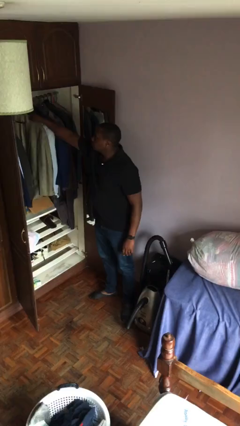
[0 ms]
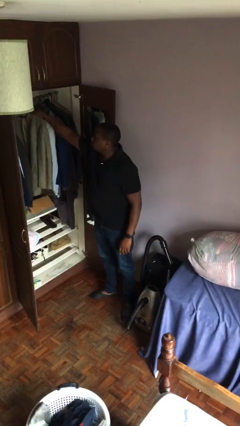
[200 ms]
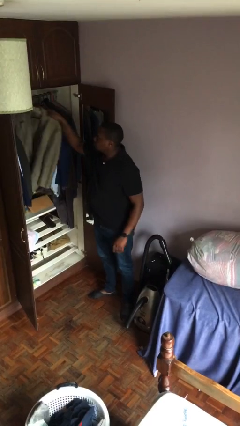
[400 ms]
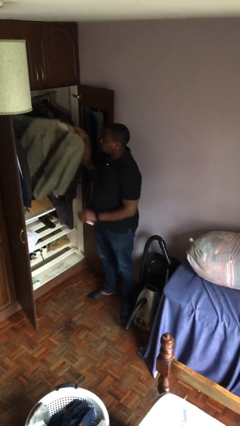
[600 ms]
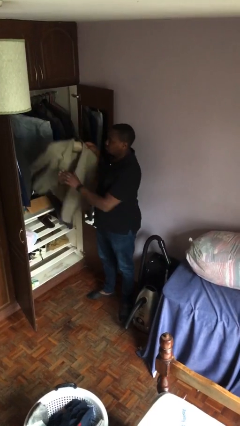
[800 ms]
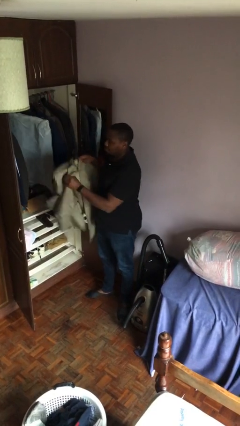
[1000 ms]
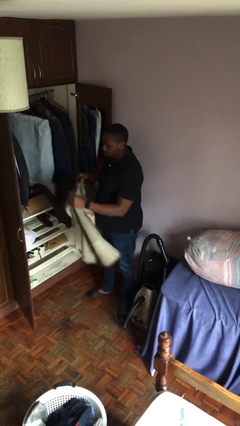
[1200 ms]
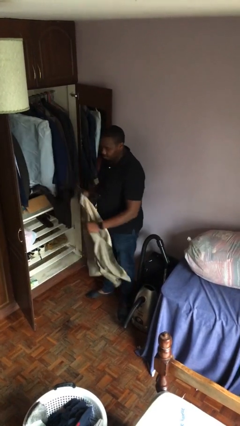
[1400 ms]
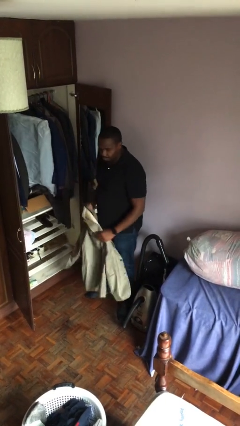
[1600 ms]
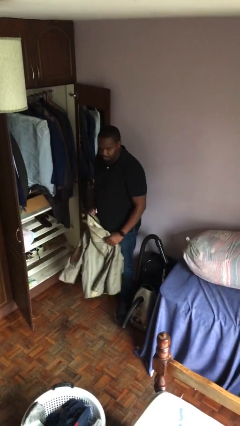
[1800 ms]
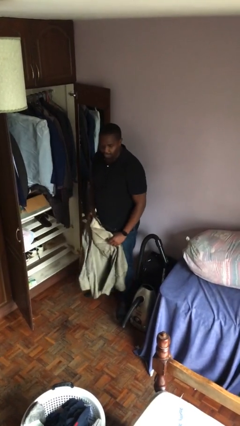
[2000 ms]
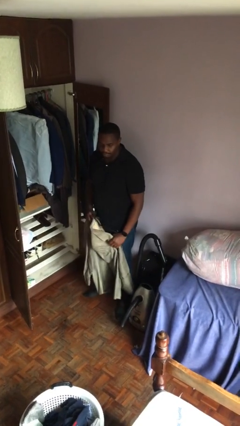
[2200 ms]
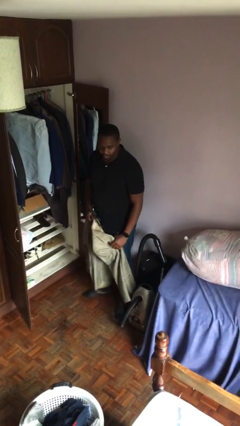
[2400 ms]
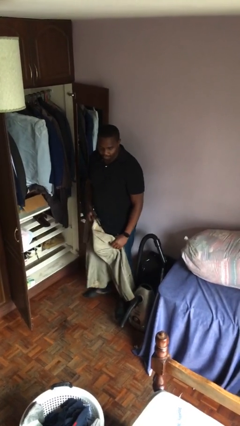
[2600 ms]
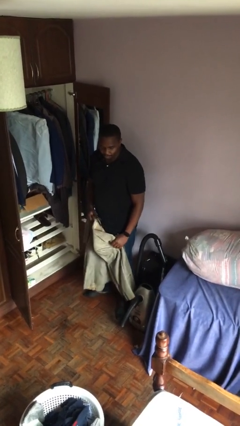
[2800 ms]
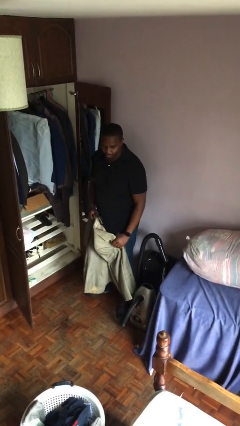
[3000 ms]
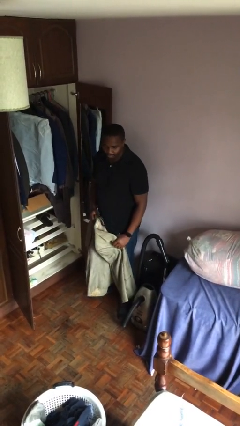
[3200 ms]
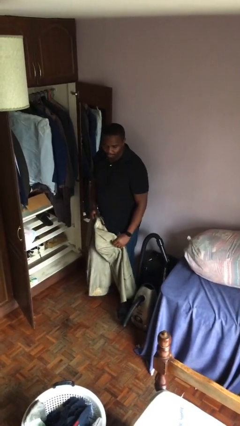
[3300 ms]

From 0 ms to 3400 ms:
person takes clothes from closet

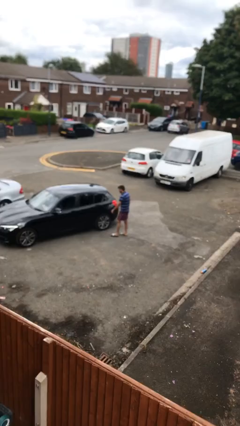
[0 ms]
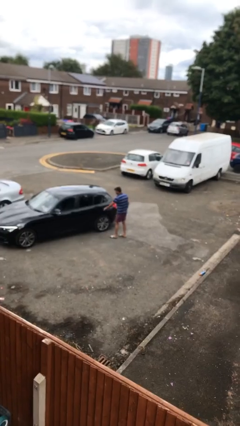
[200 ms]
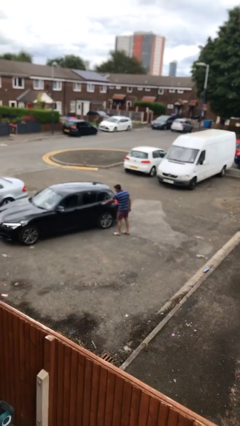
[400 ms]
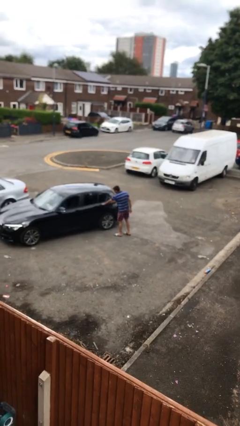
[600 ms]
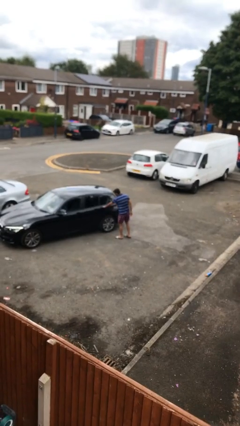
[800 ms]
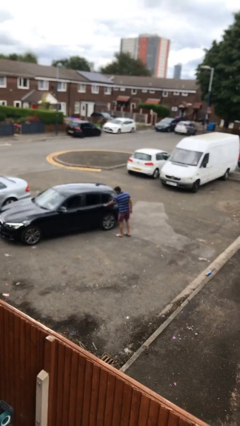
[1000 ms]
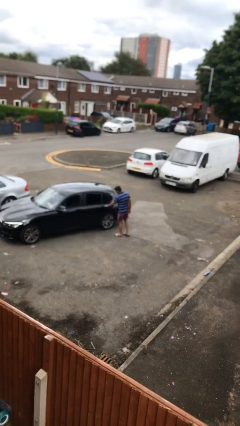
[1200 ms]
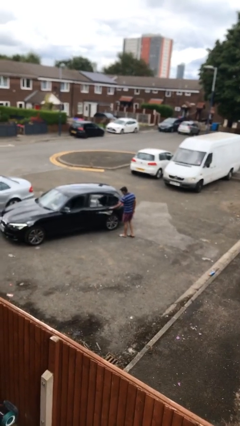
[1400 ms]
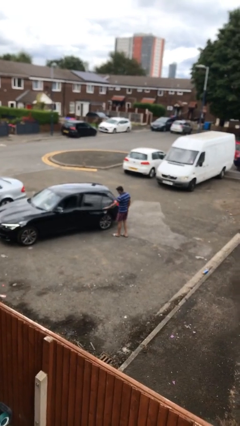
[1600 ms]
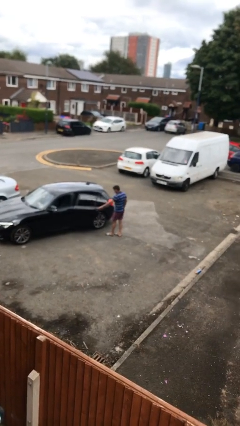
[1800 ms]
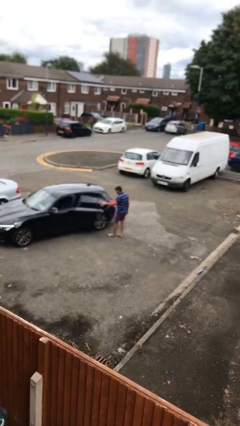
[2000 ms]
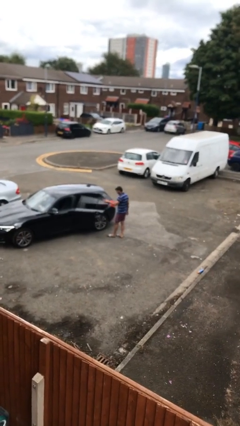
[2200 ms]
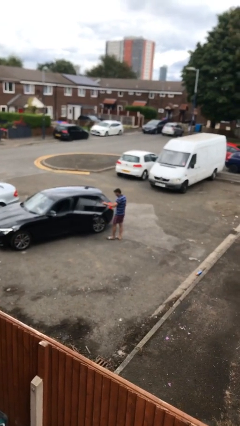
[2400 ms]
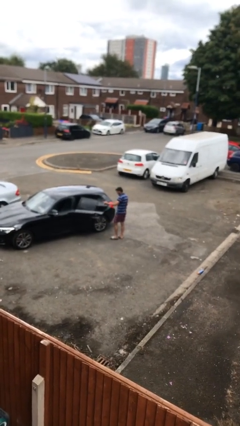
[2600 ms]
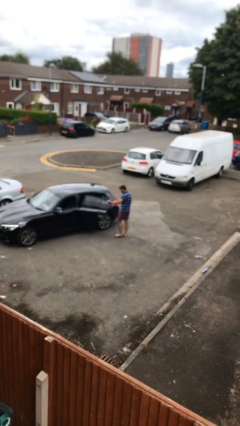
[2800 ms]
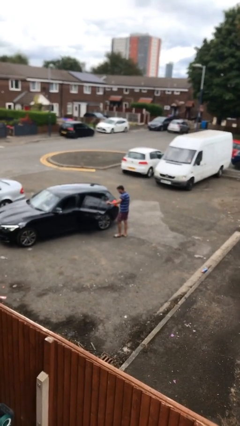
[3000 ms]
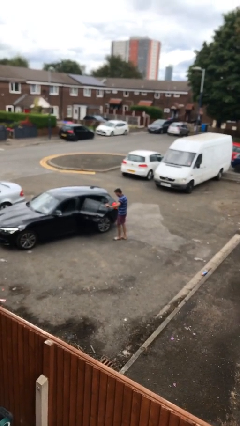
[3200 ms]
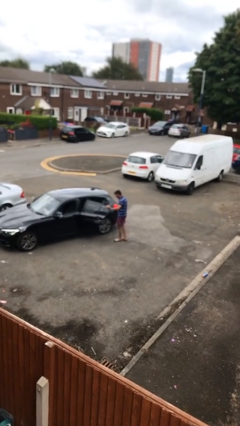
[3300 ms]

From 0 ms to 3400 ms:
person opens car door

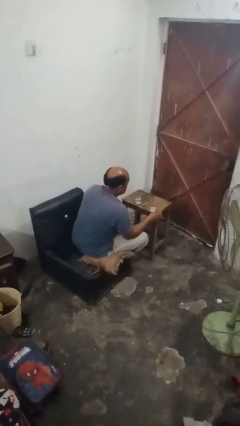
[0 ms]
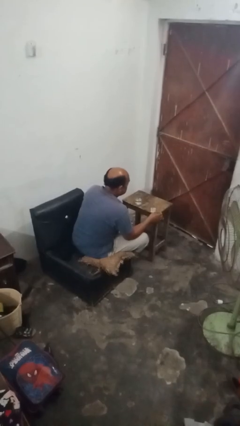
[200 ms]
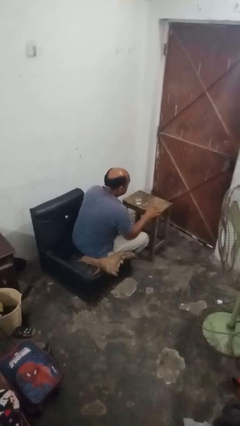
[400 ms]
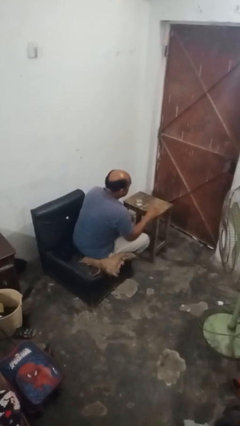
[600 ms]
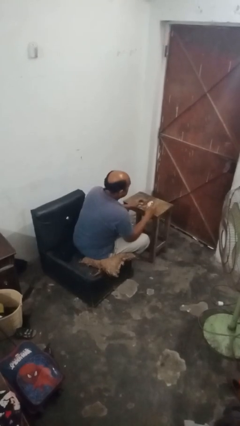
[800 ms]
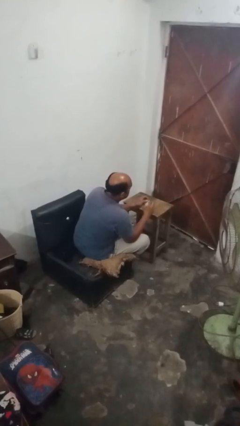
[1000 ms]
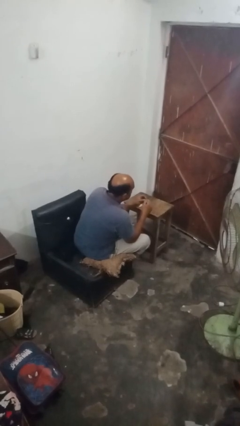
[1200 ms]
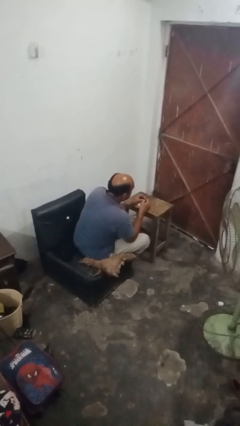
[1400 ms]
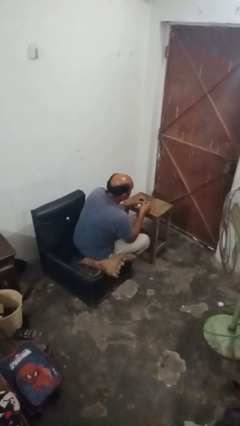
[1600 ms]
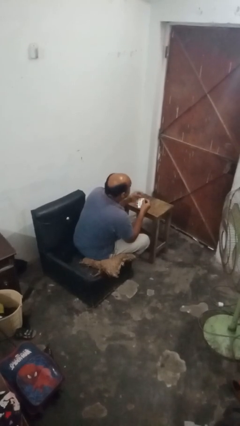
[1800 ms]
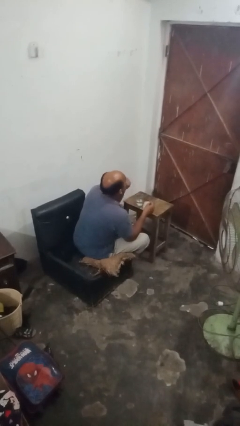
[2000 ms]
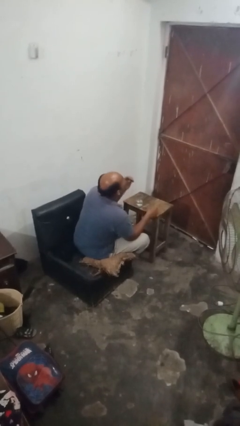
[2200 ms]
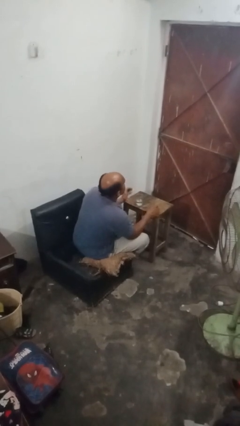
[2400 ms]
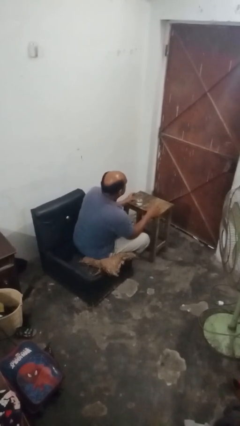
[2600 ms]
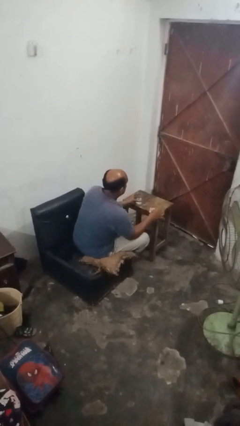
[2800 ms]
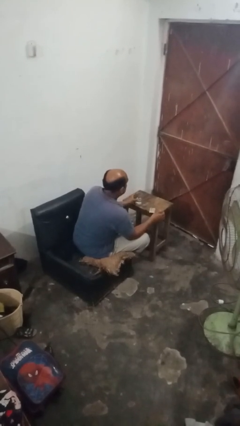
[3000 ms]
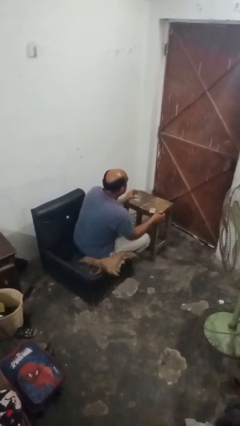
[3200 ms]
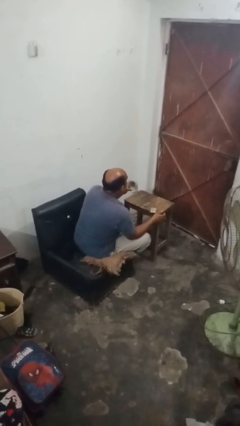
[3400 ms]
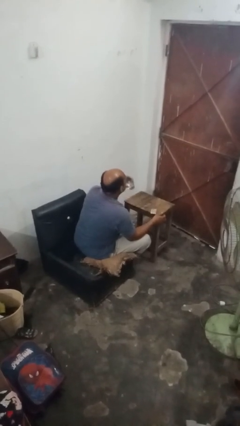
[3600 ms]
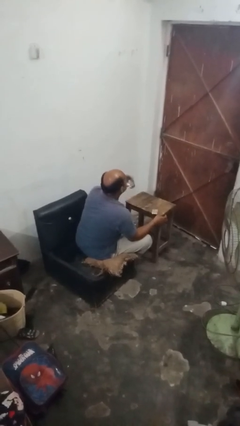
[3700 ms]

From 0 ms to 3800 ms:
person takes medicine pills

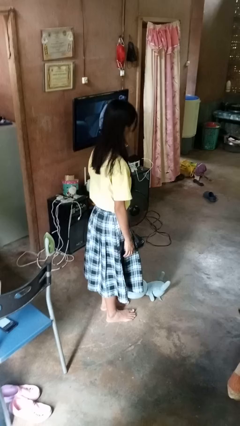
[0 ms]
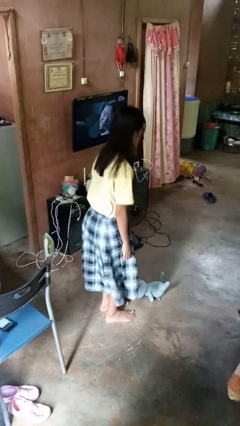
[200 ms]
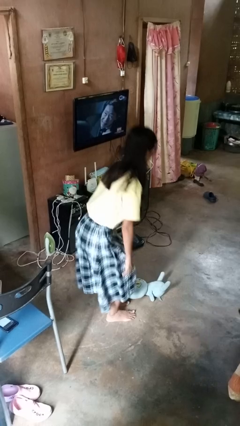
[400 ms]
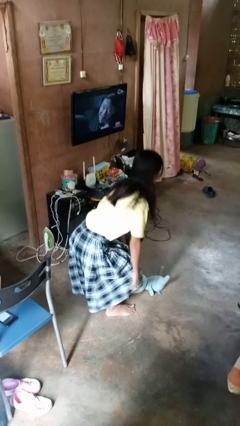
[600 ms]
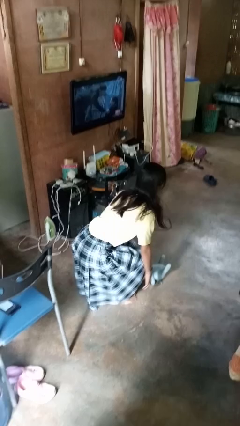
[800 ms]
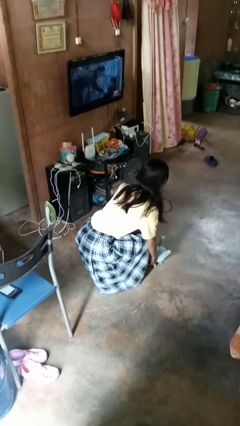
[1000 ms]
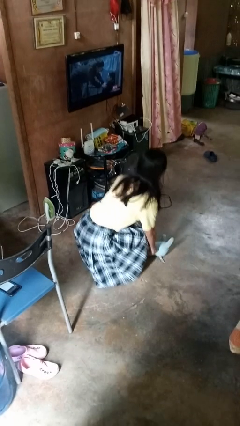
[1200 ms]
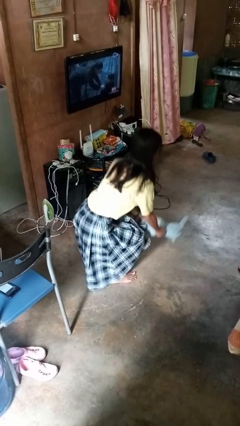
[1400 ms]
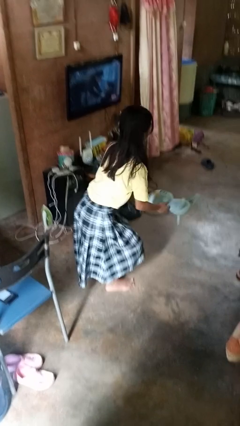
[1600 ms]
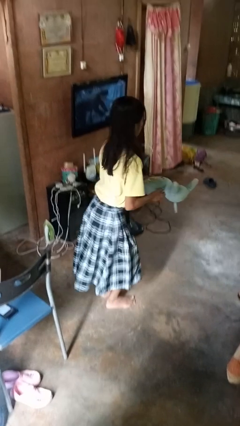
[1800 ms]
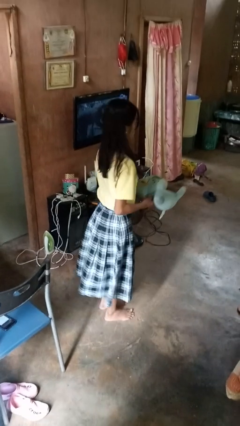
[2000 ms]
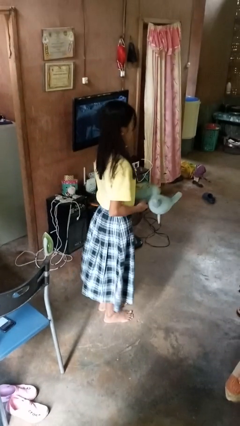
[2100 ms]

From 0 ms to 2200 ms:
person picks up object from floor

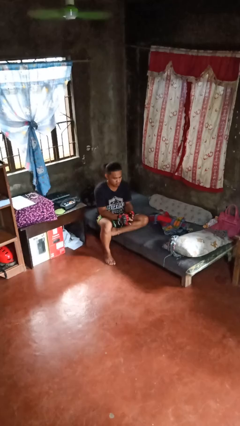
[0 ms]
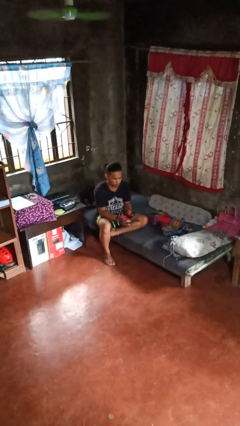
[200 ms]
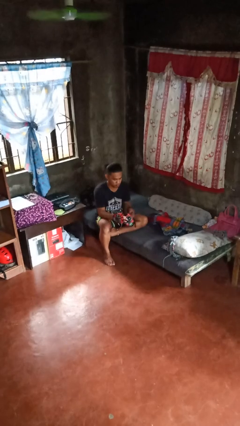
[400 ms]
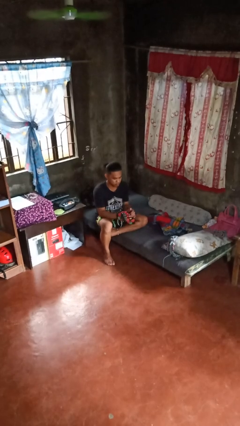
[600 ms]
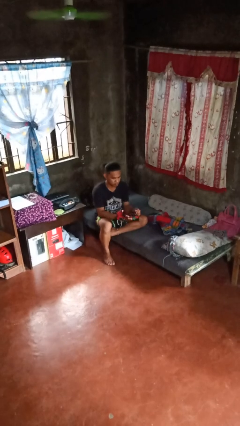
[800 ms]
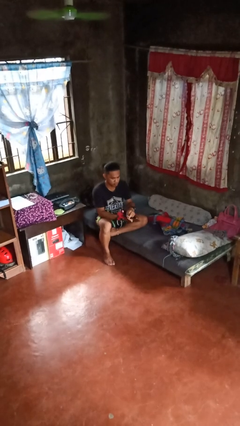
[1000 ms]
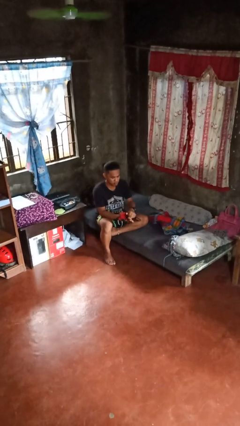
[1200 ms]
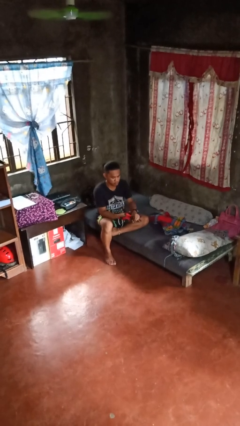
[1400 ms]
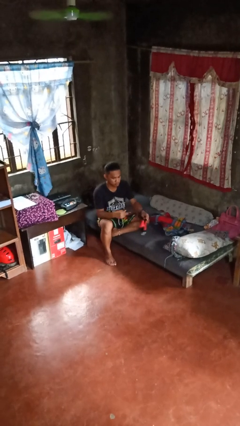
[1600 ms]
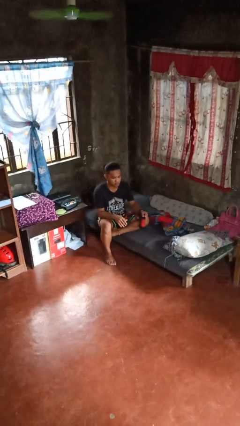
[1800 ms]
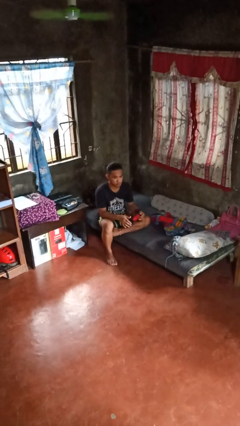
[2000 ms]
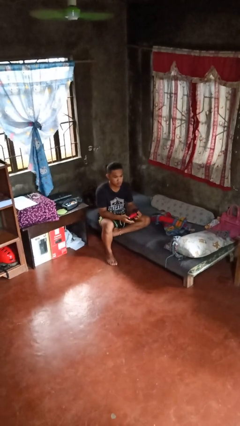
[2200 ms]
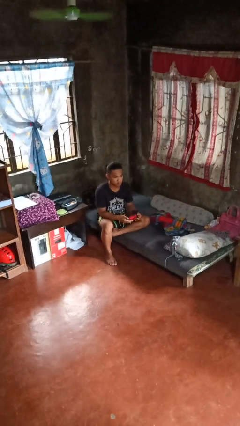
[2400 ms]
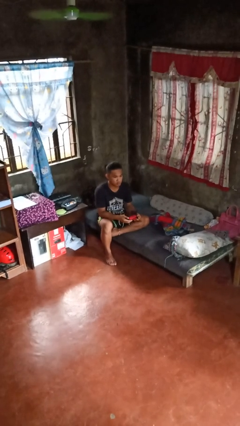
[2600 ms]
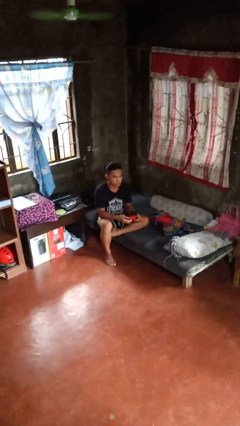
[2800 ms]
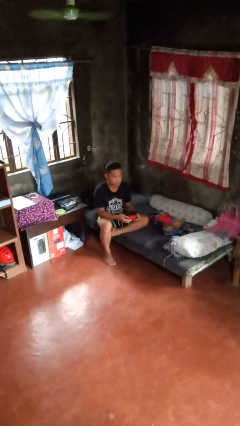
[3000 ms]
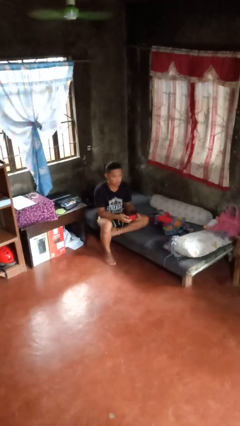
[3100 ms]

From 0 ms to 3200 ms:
person takes off gloves

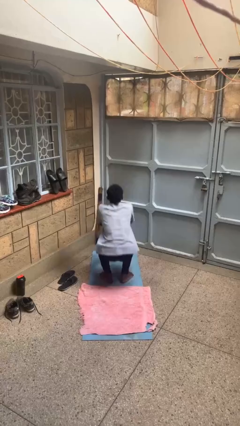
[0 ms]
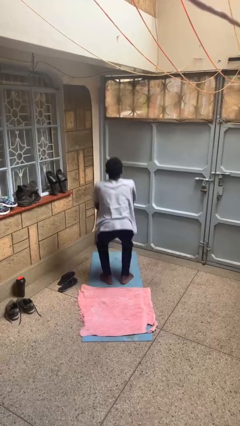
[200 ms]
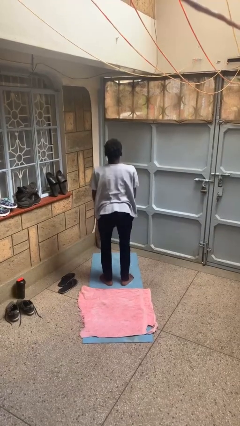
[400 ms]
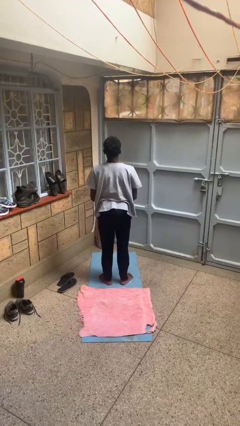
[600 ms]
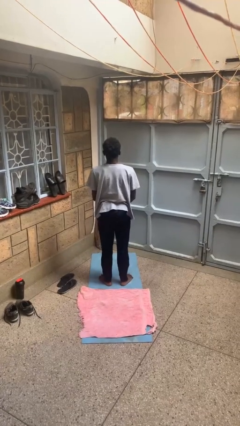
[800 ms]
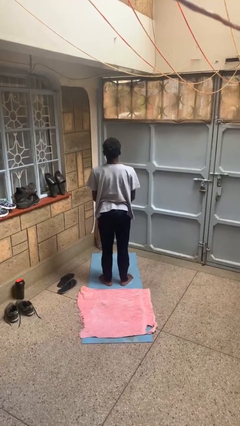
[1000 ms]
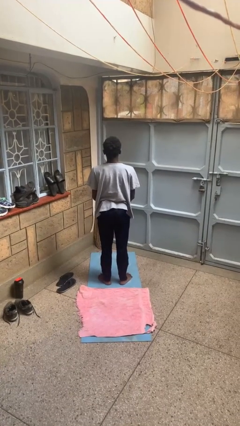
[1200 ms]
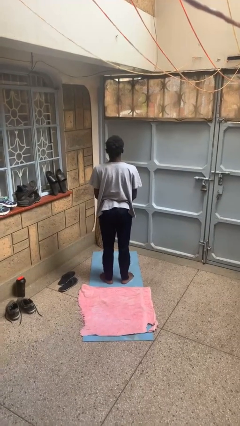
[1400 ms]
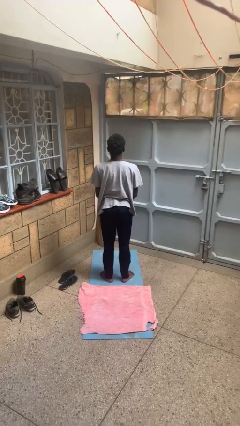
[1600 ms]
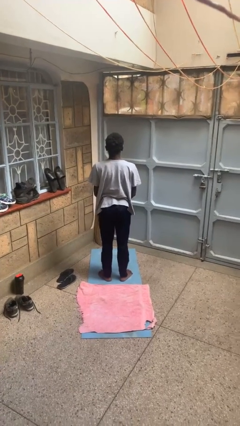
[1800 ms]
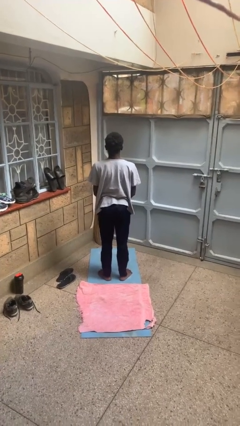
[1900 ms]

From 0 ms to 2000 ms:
person stands up
